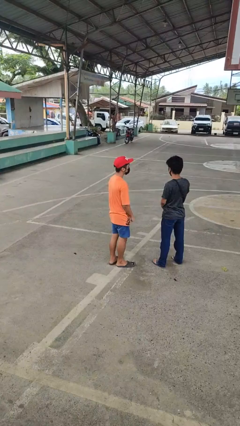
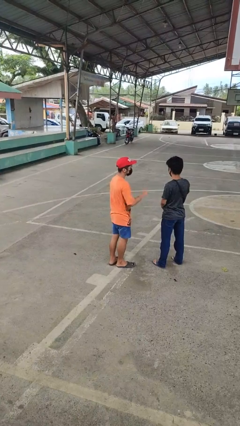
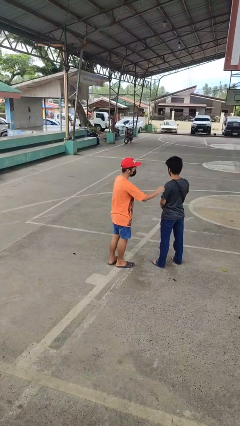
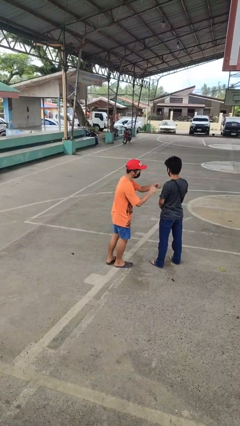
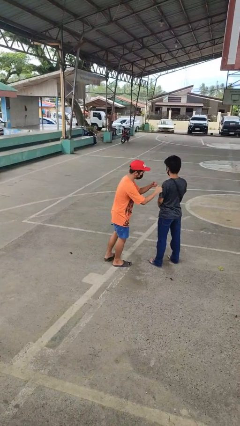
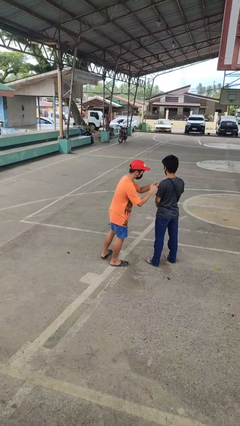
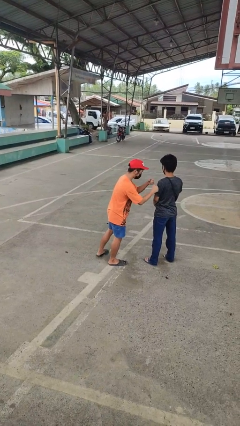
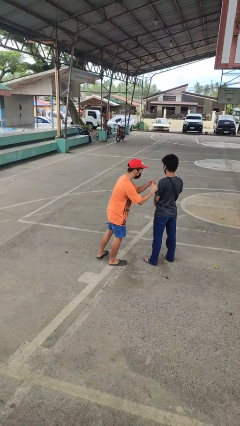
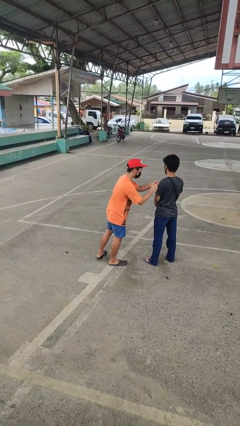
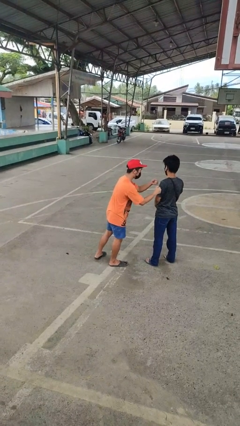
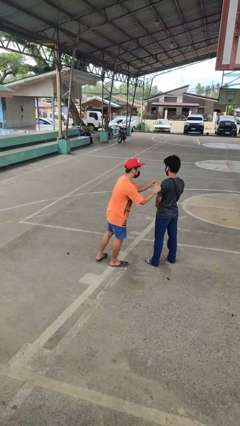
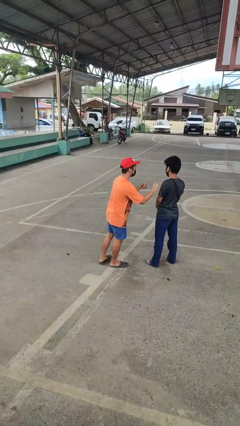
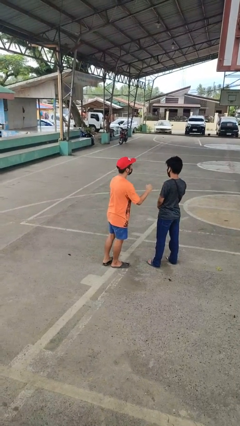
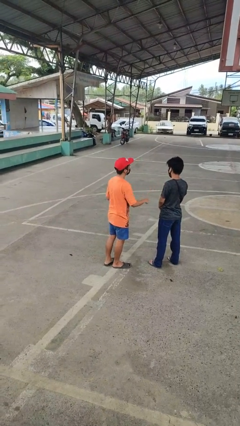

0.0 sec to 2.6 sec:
person pounds shoulders of person

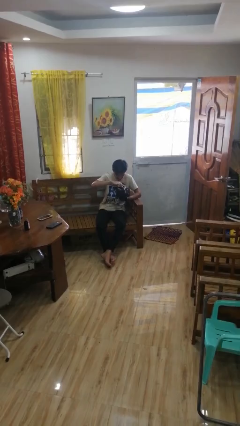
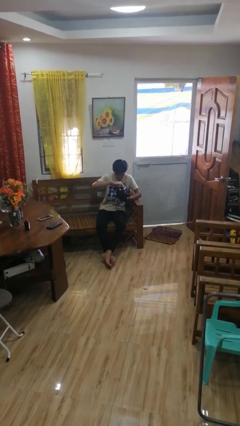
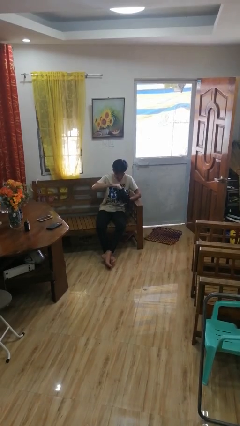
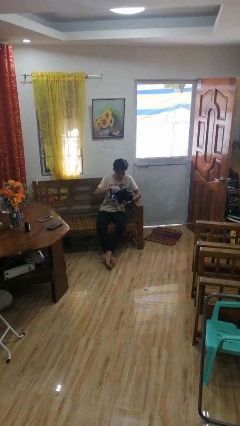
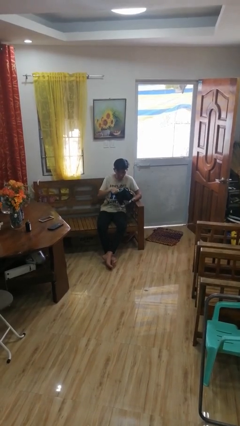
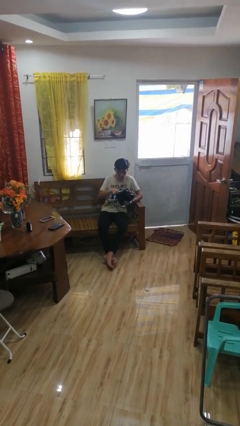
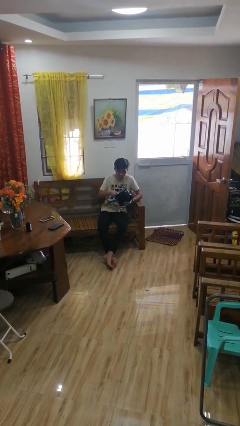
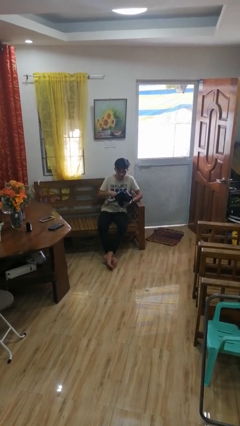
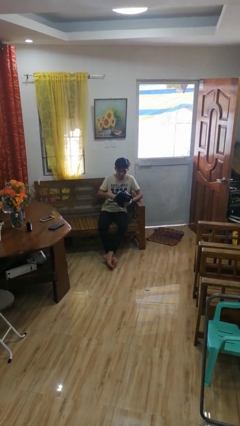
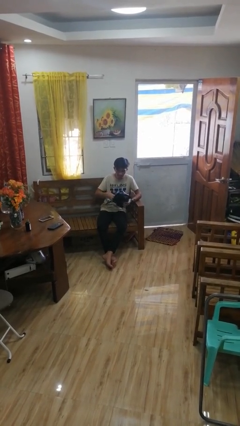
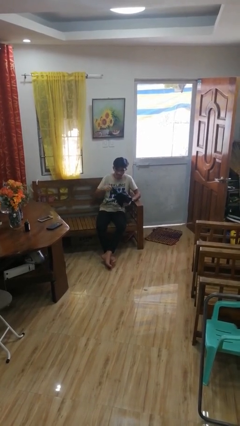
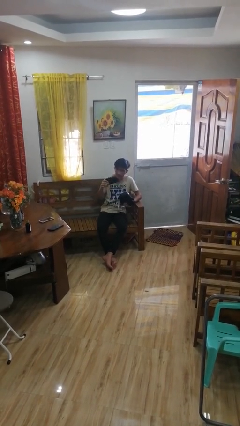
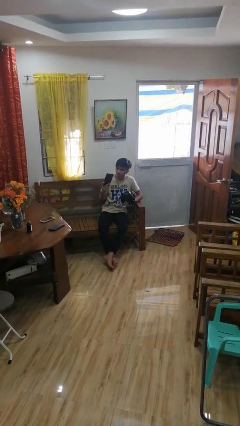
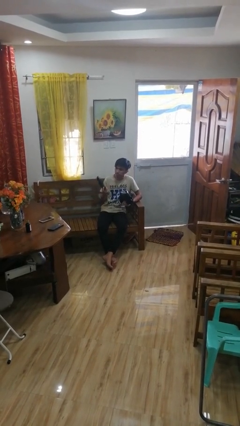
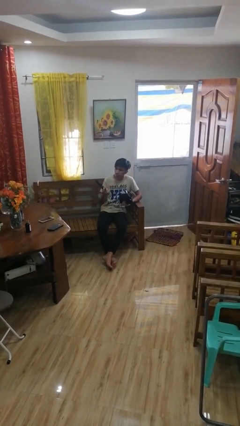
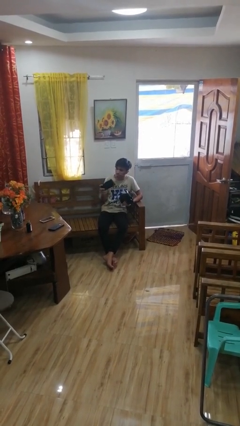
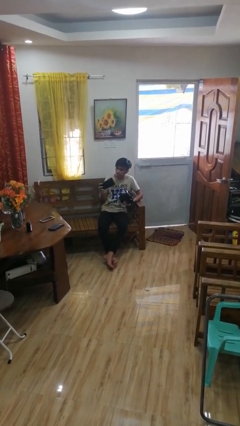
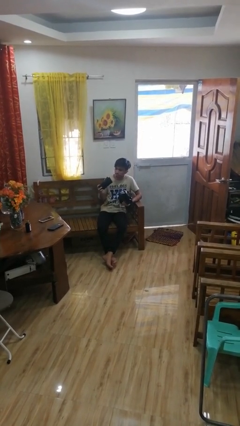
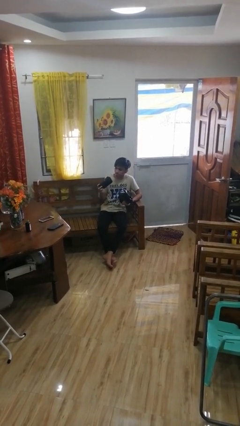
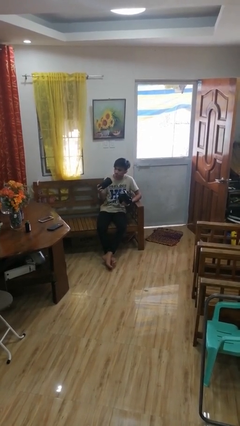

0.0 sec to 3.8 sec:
person takes object from purse

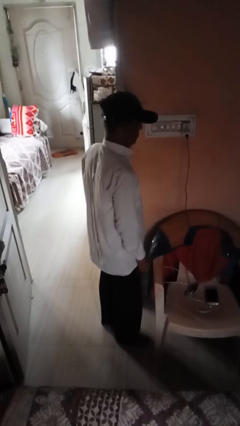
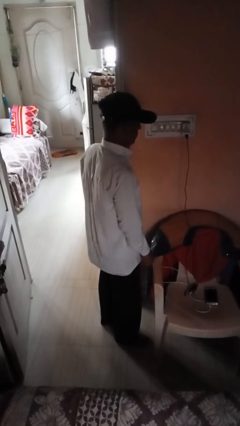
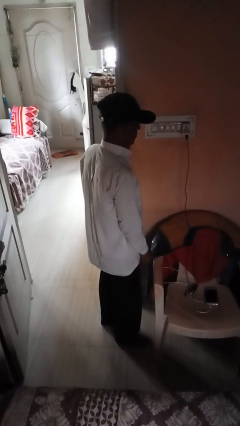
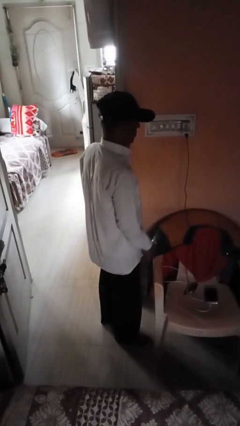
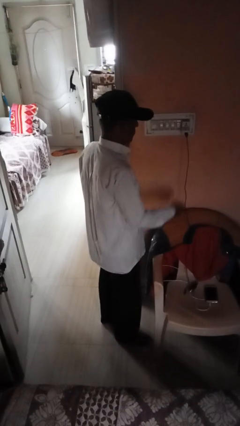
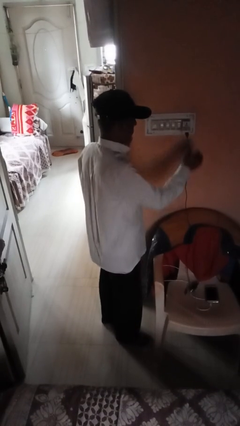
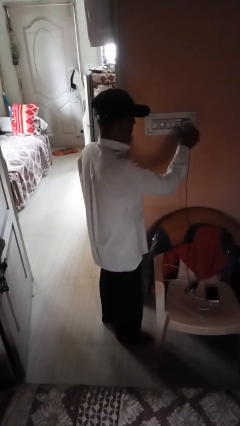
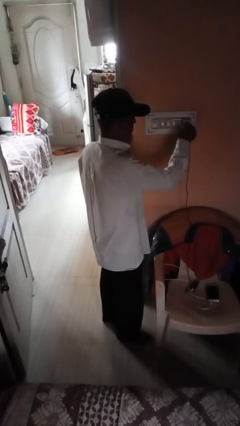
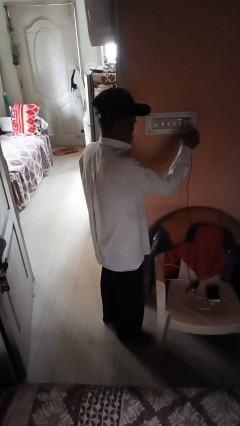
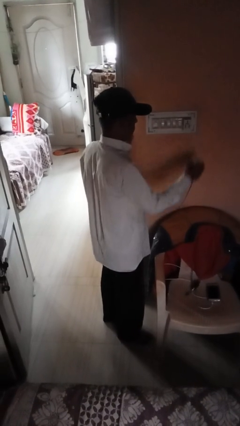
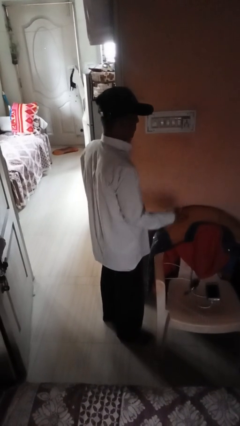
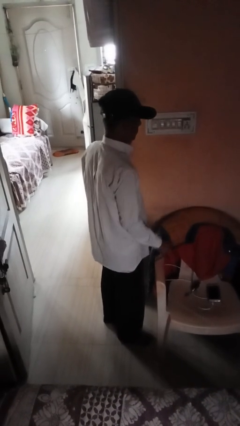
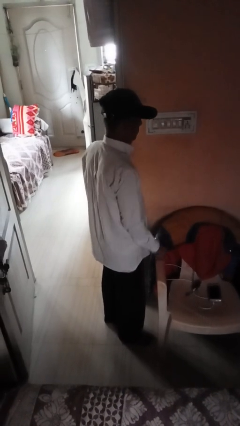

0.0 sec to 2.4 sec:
person unplugs from electrical socket

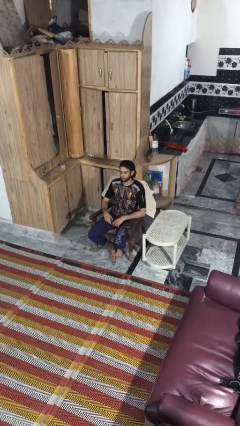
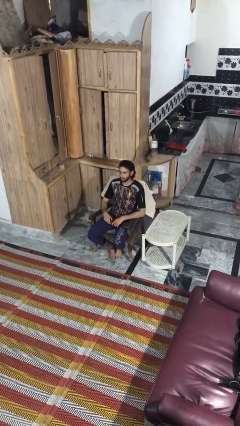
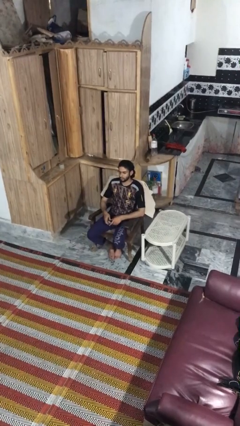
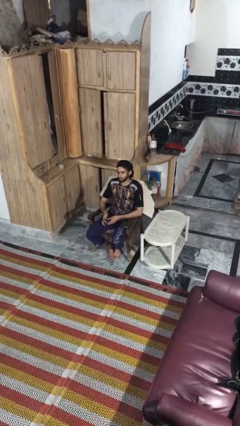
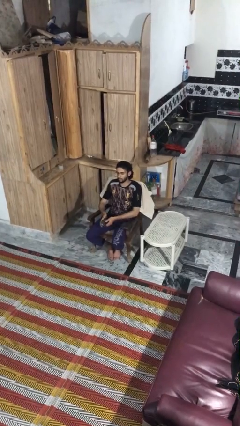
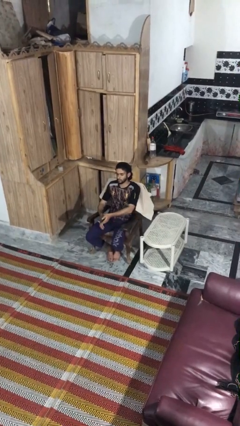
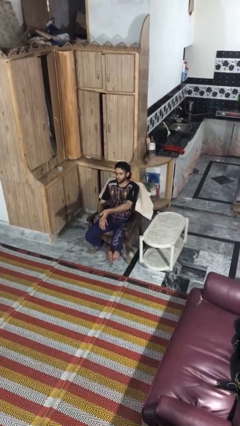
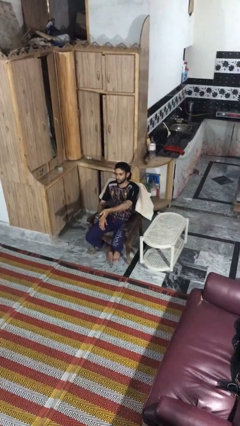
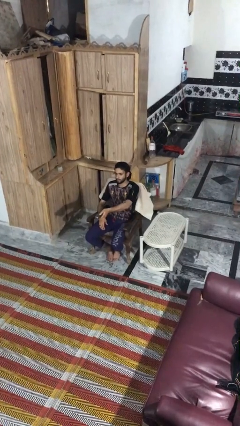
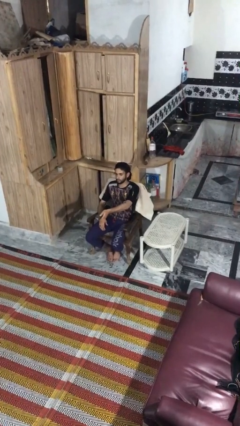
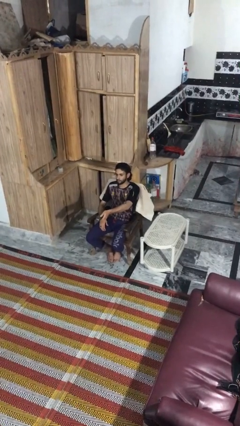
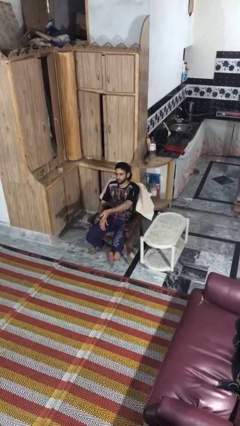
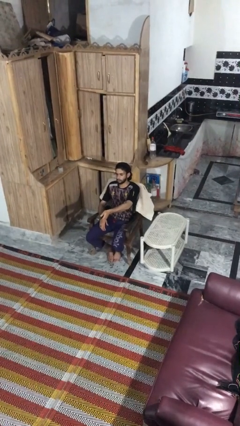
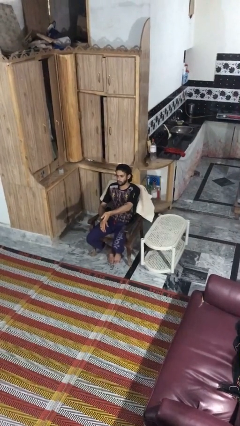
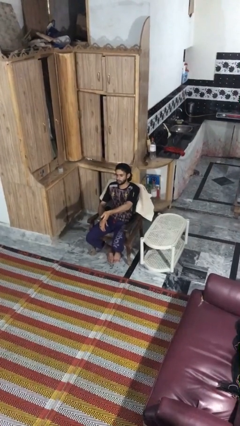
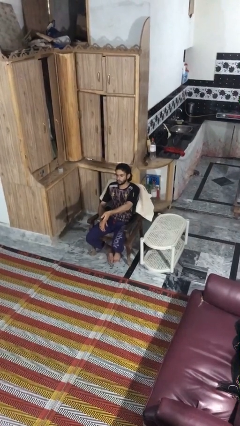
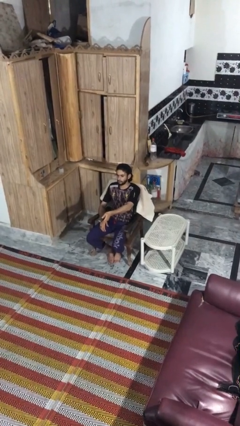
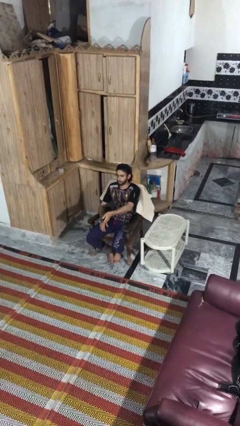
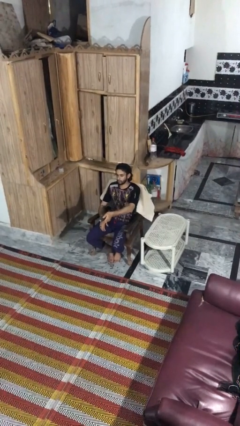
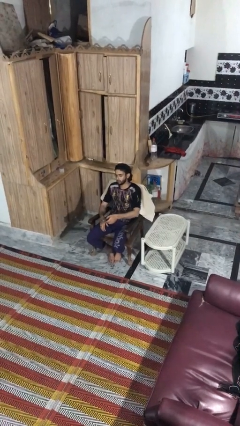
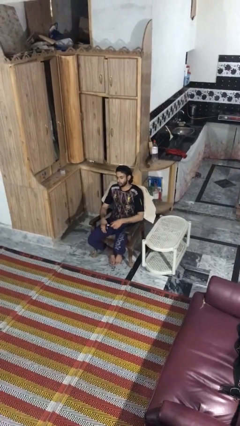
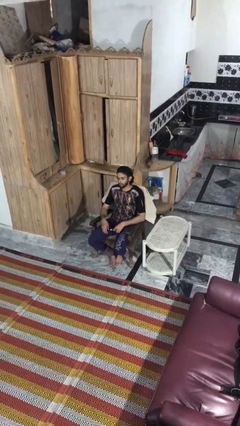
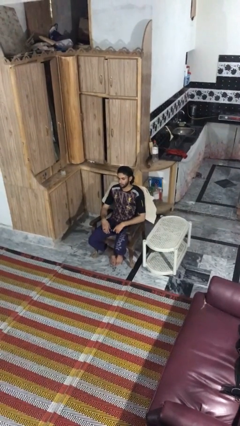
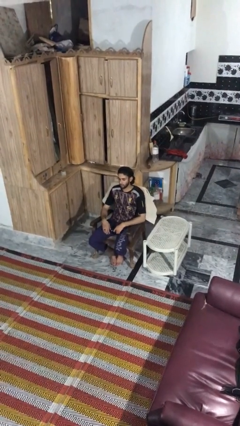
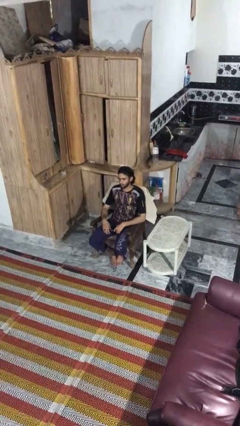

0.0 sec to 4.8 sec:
person uses television remote

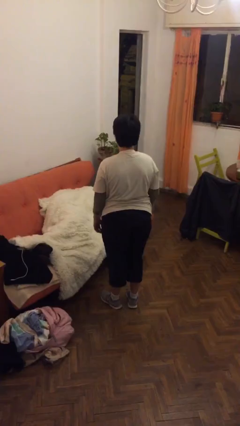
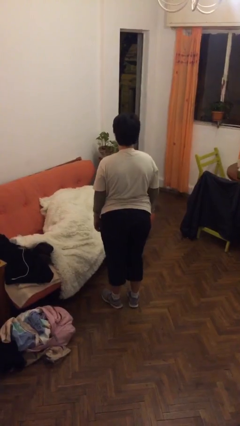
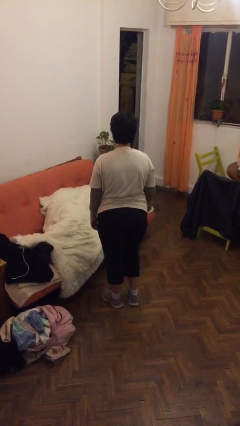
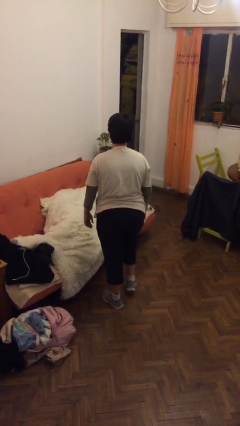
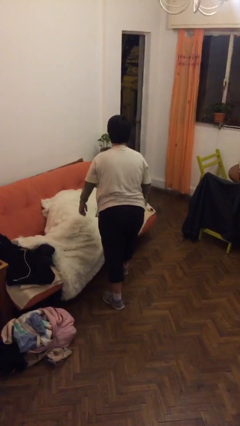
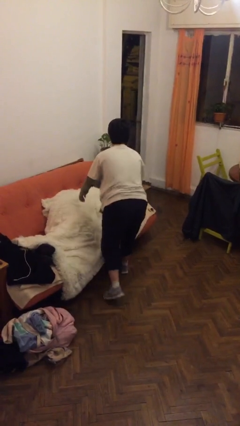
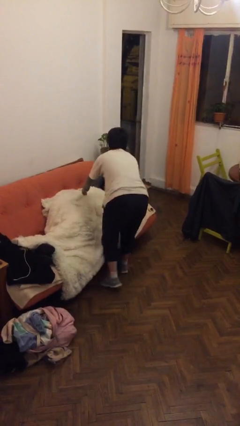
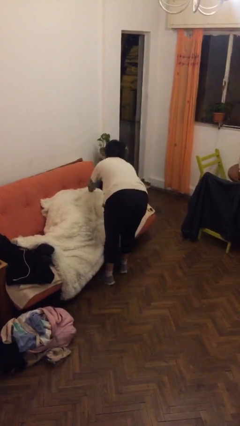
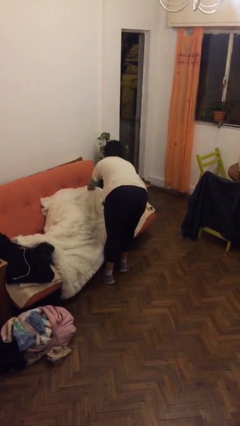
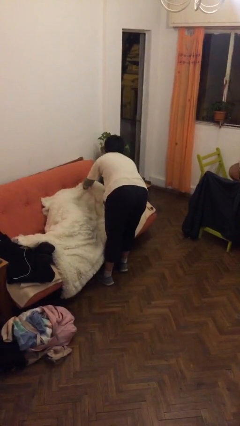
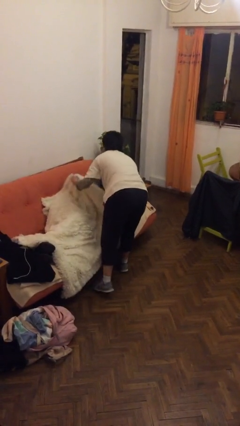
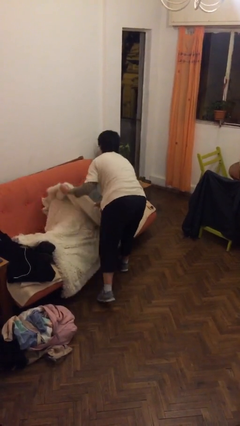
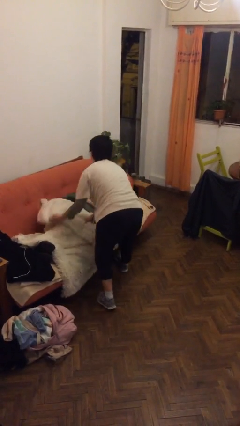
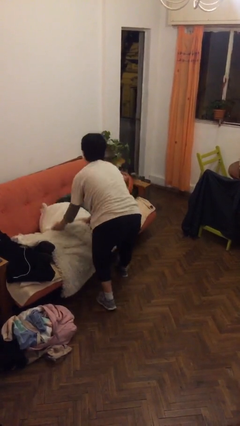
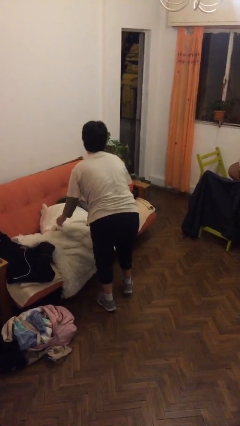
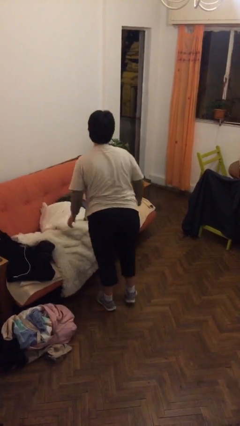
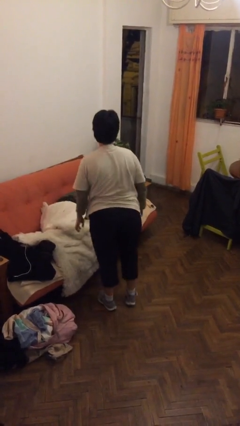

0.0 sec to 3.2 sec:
person uncovers friend with blanket

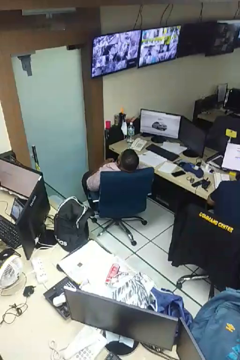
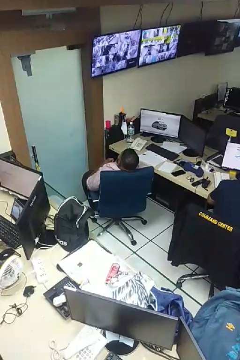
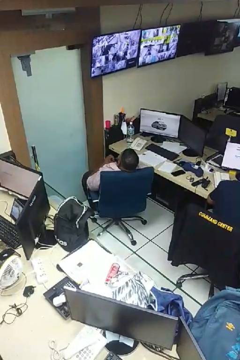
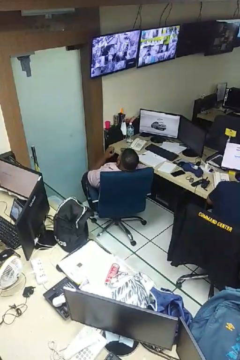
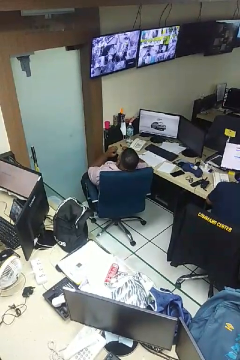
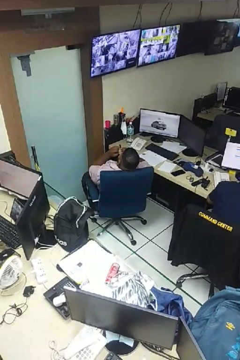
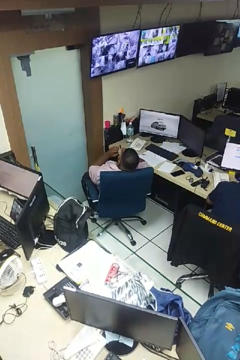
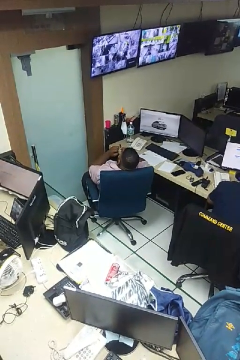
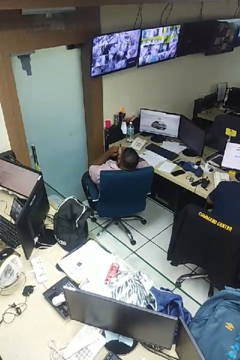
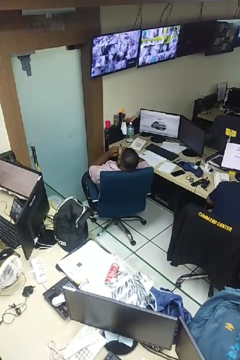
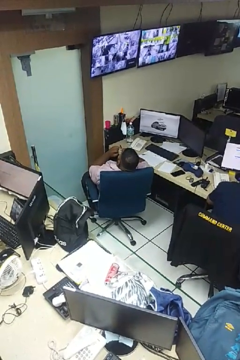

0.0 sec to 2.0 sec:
person files fingernails
